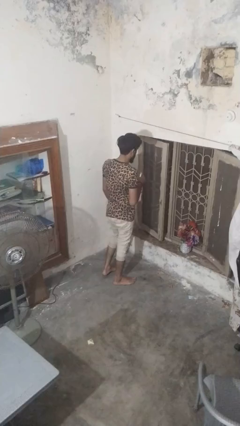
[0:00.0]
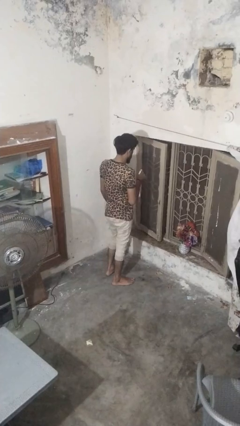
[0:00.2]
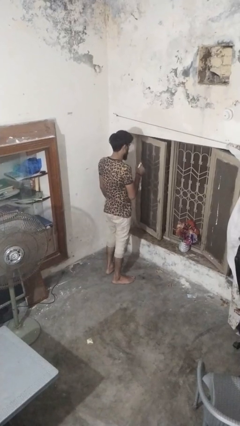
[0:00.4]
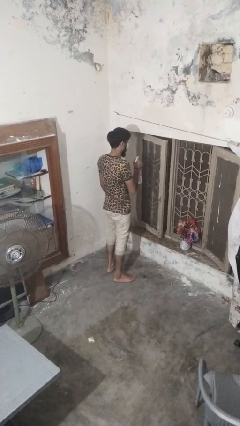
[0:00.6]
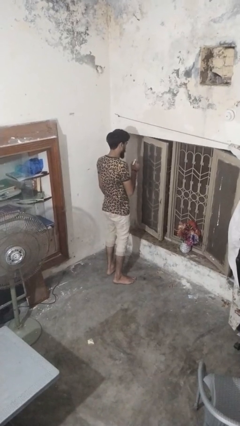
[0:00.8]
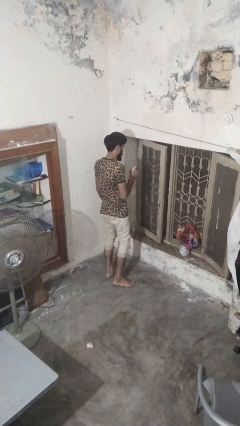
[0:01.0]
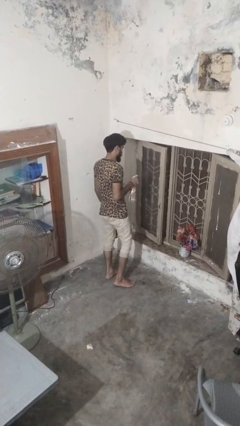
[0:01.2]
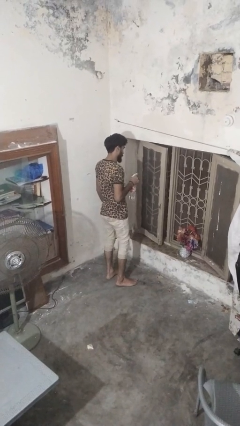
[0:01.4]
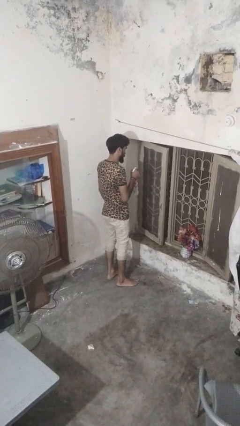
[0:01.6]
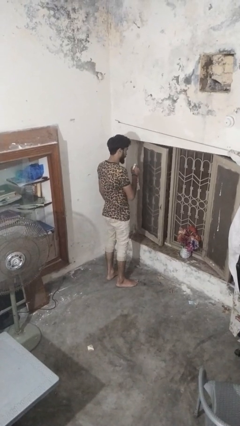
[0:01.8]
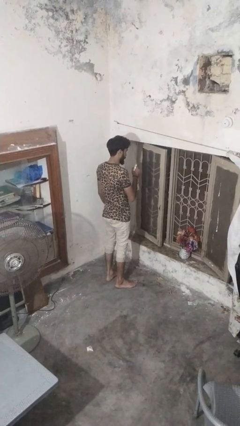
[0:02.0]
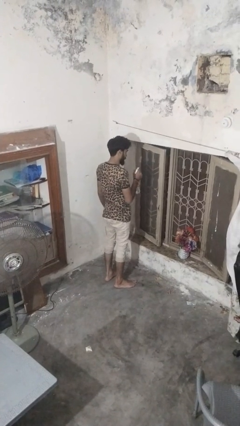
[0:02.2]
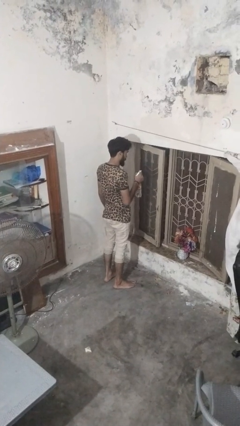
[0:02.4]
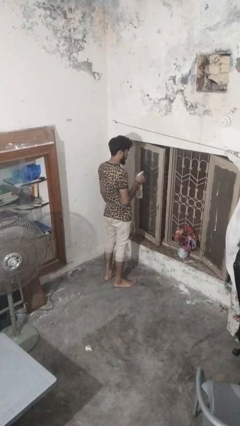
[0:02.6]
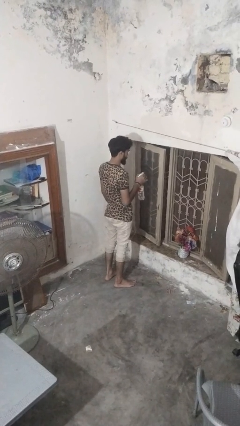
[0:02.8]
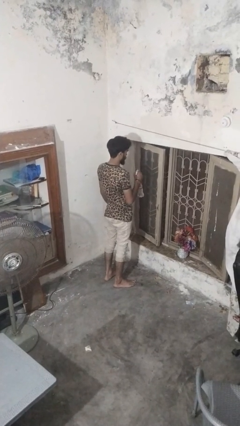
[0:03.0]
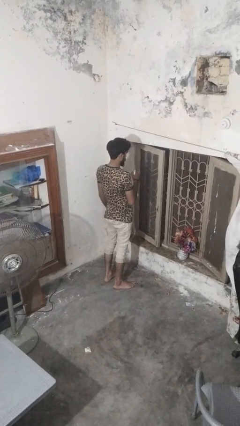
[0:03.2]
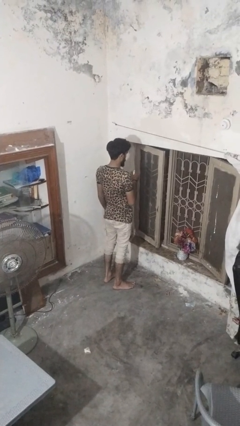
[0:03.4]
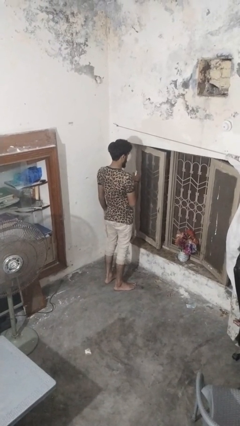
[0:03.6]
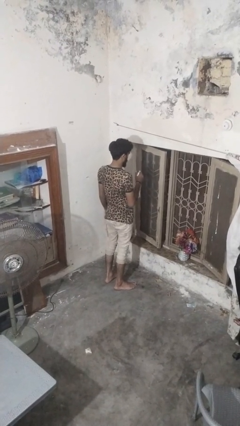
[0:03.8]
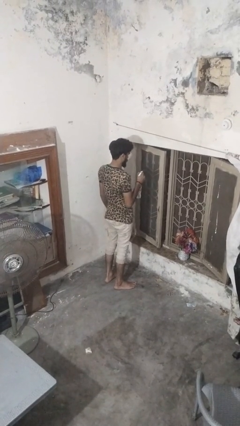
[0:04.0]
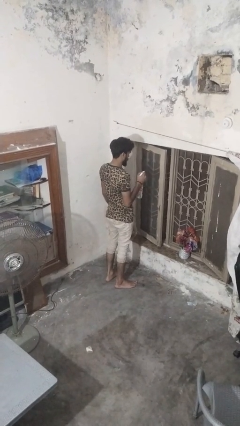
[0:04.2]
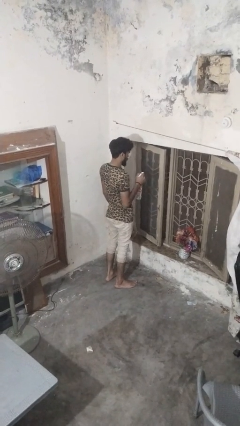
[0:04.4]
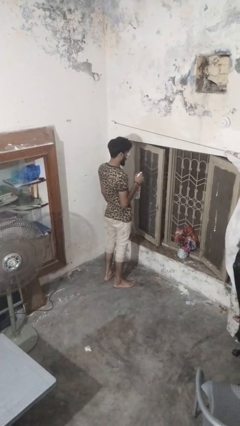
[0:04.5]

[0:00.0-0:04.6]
person sprays from bottle

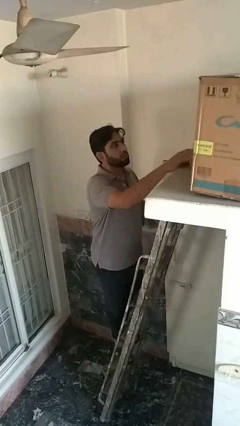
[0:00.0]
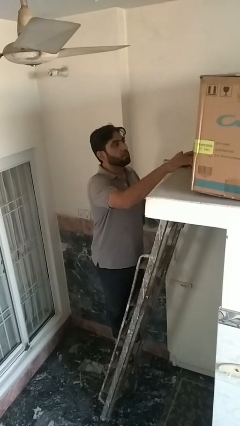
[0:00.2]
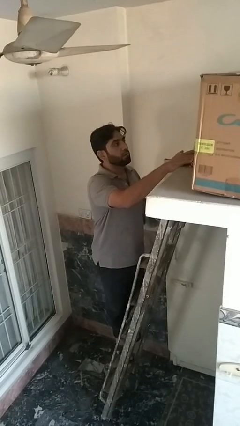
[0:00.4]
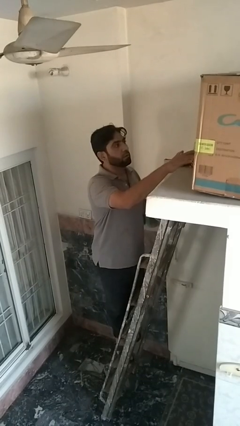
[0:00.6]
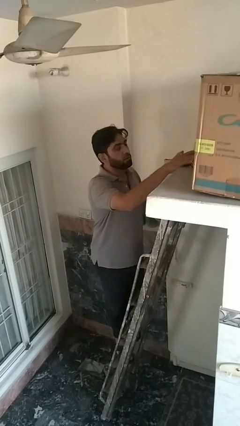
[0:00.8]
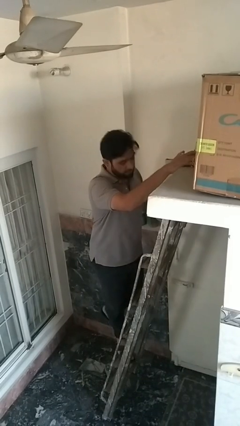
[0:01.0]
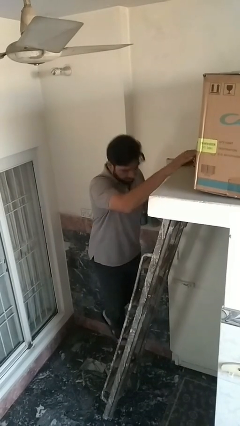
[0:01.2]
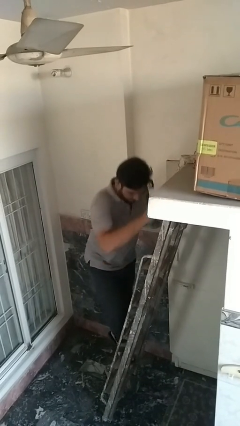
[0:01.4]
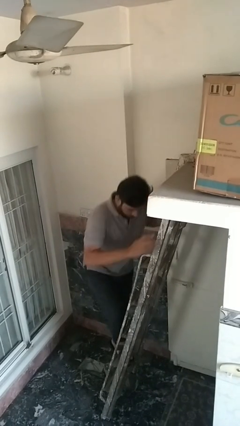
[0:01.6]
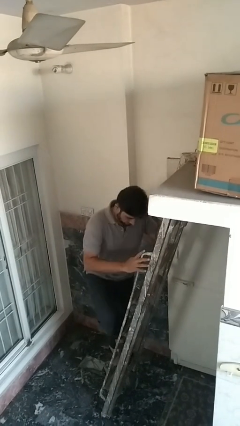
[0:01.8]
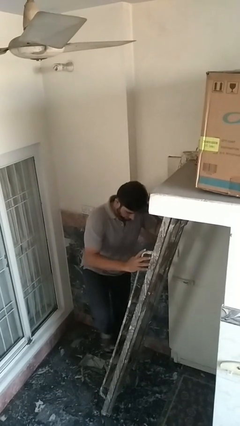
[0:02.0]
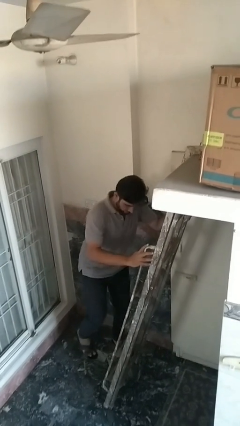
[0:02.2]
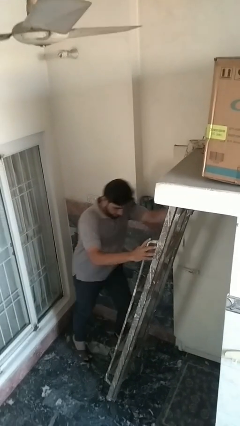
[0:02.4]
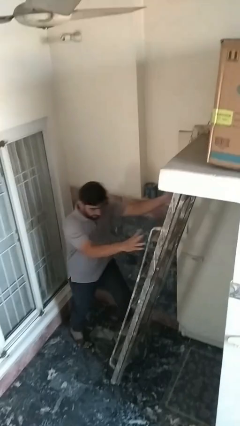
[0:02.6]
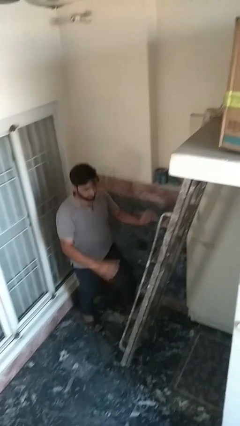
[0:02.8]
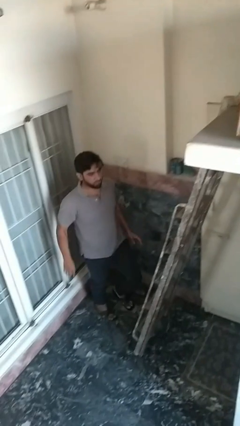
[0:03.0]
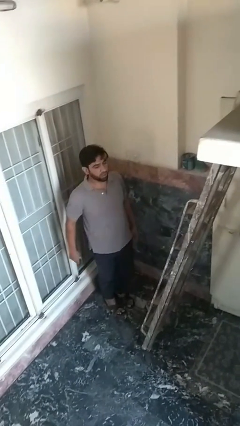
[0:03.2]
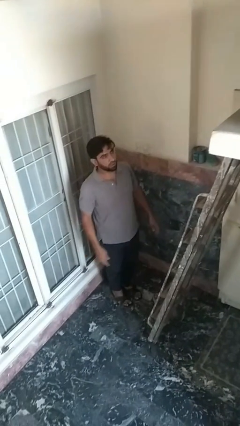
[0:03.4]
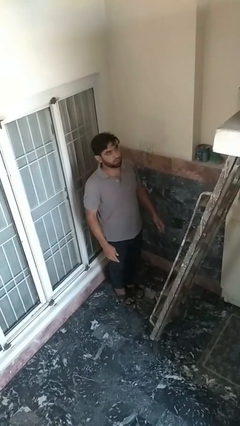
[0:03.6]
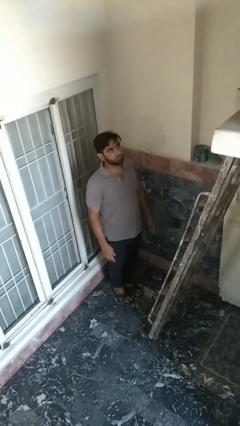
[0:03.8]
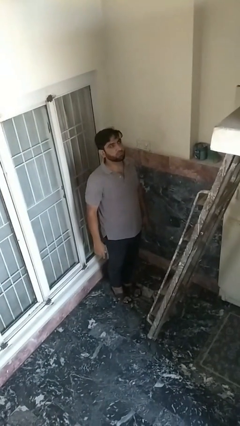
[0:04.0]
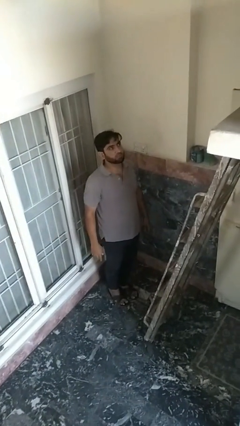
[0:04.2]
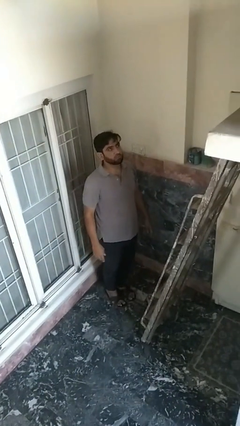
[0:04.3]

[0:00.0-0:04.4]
person climbs down ladder

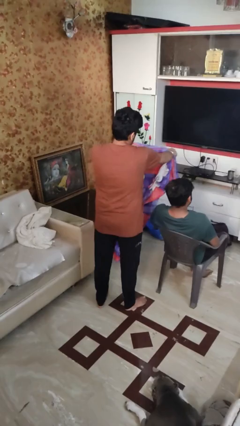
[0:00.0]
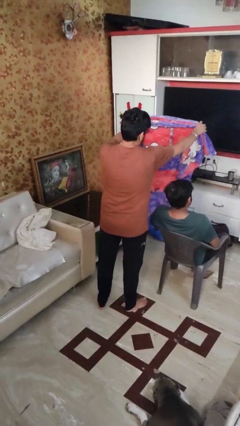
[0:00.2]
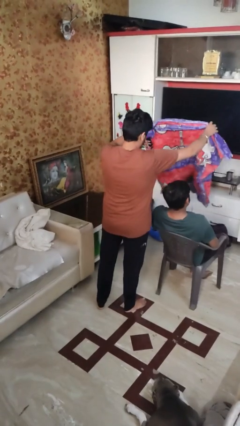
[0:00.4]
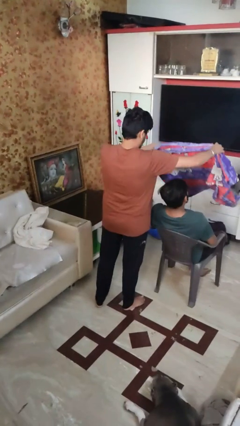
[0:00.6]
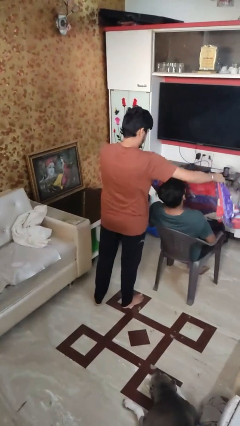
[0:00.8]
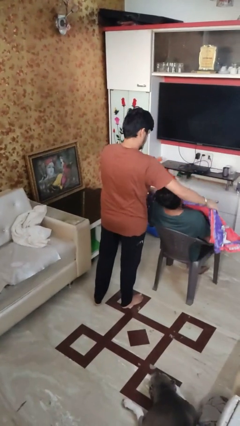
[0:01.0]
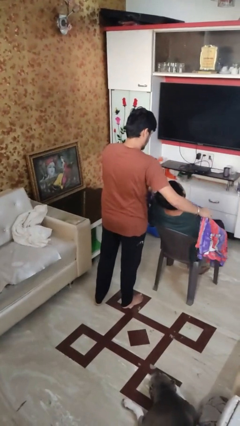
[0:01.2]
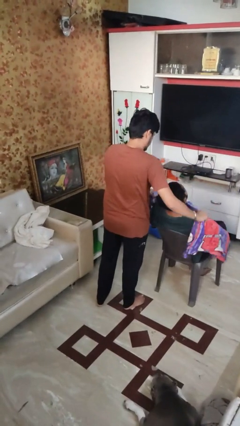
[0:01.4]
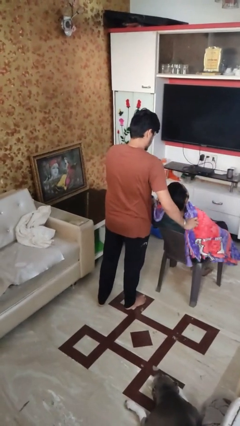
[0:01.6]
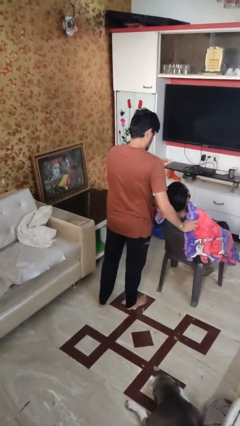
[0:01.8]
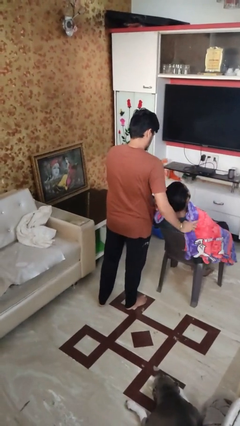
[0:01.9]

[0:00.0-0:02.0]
person covers friend with blanket

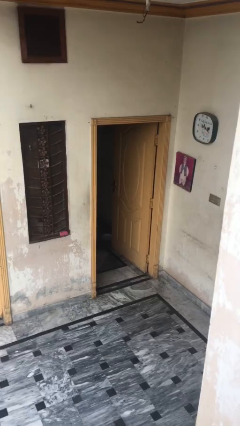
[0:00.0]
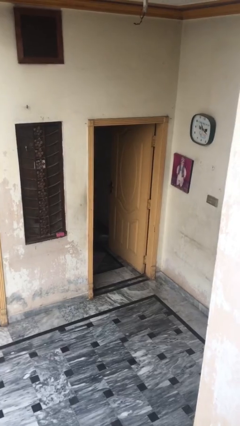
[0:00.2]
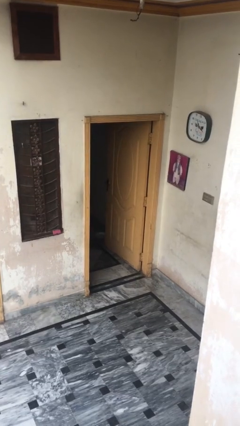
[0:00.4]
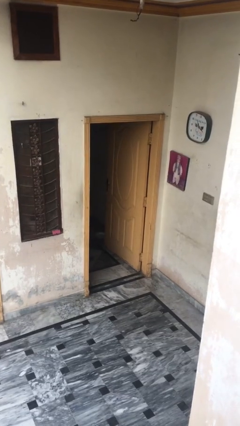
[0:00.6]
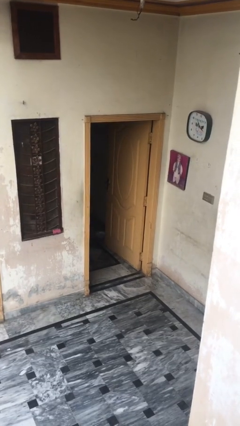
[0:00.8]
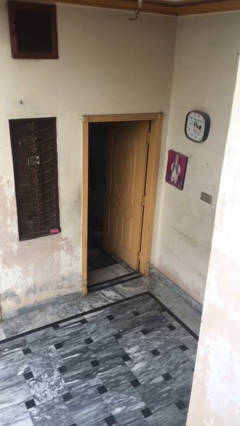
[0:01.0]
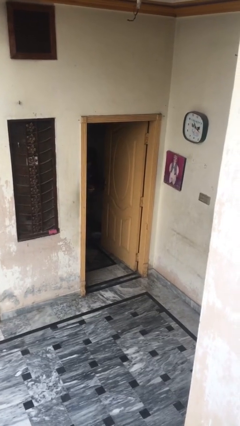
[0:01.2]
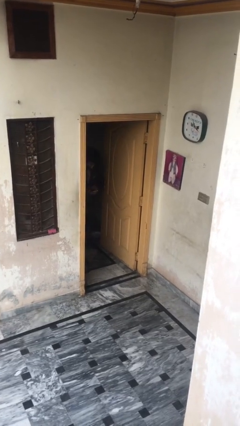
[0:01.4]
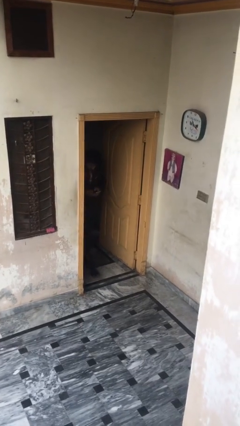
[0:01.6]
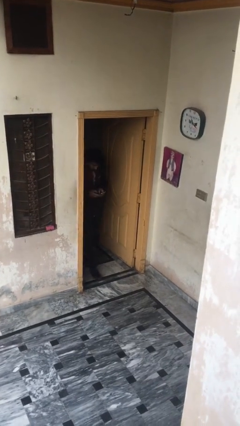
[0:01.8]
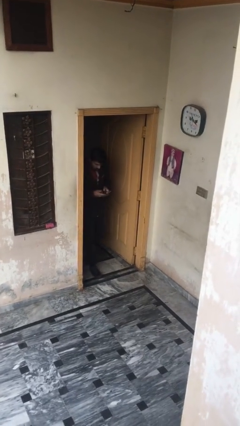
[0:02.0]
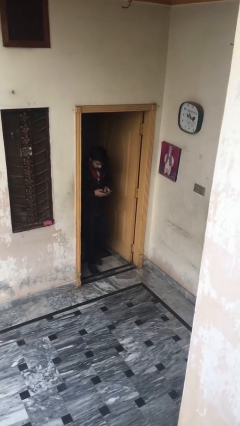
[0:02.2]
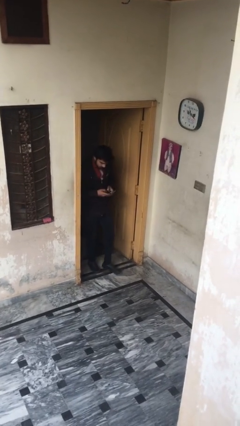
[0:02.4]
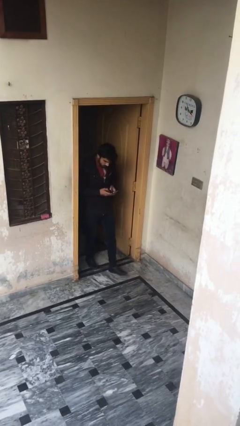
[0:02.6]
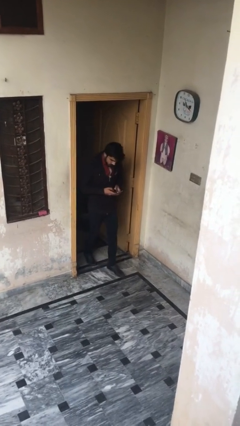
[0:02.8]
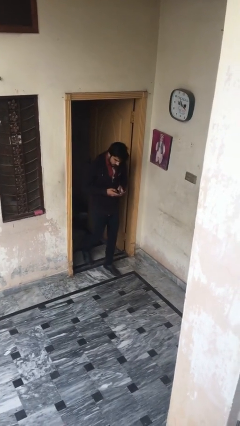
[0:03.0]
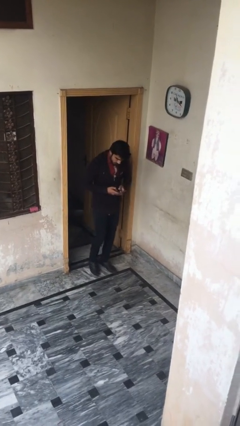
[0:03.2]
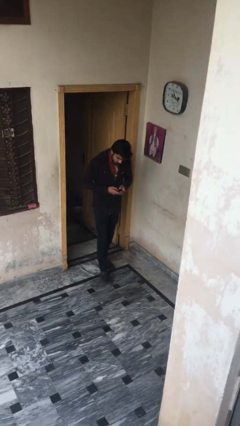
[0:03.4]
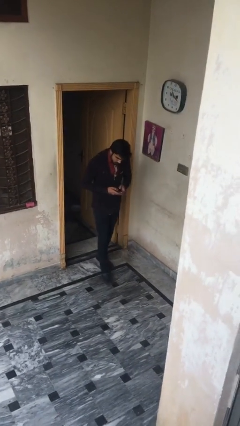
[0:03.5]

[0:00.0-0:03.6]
person enters scene through structure

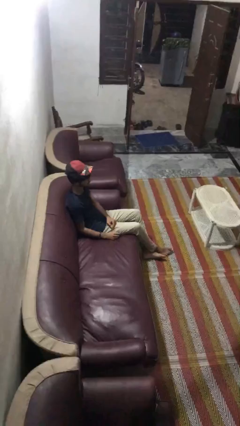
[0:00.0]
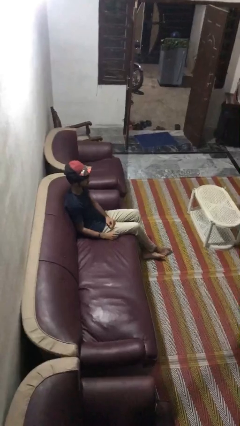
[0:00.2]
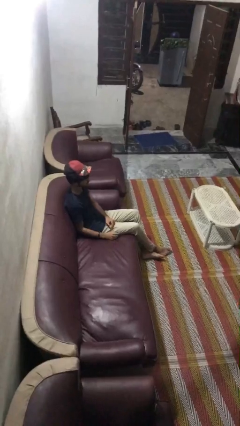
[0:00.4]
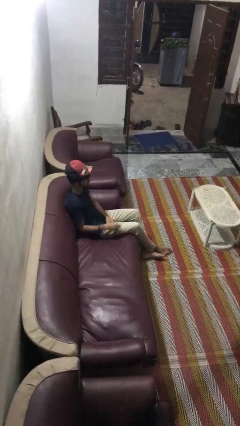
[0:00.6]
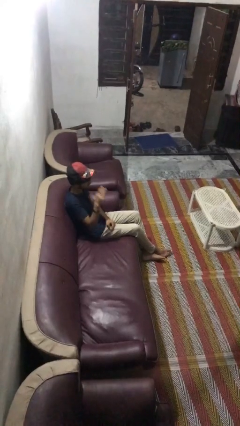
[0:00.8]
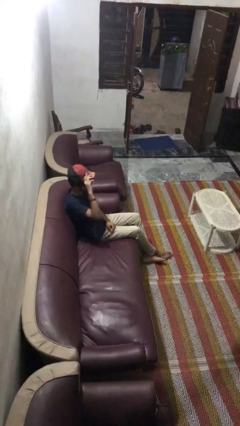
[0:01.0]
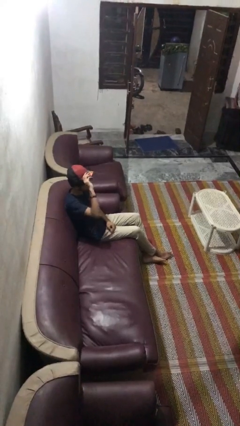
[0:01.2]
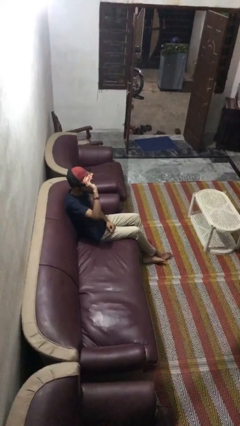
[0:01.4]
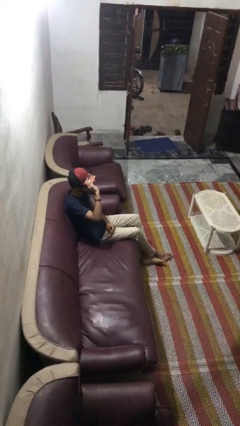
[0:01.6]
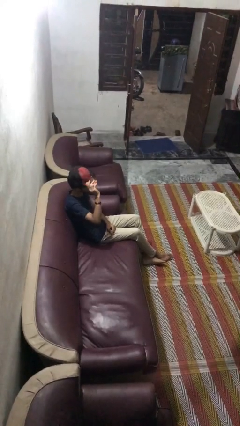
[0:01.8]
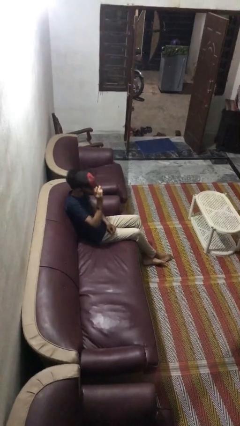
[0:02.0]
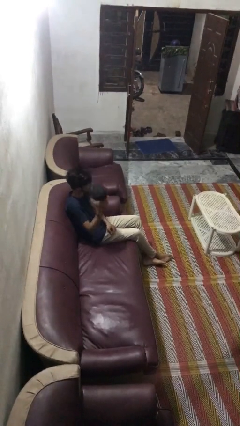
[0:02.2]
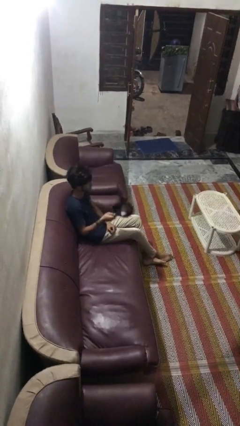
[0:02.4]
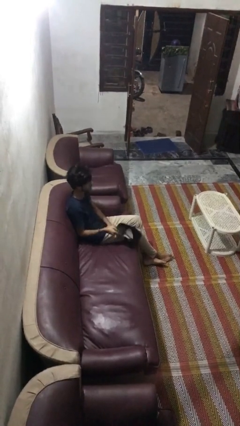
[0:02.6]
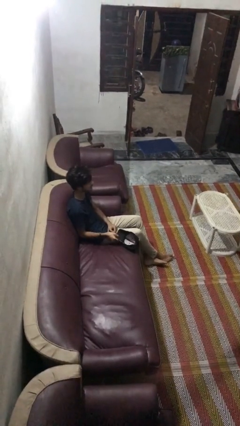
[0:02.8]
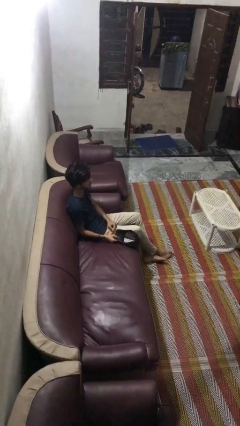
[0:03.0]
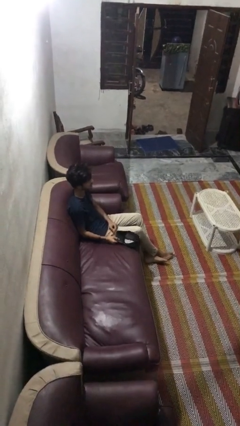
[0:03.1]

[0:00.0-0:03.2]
person takes off hat
